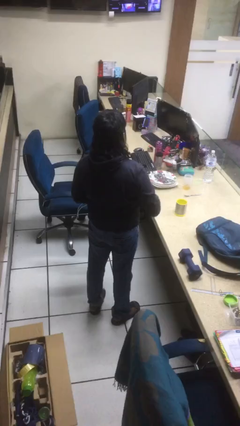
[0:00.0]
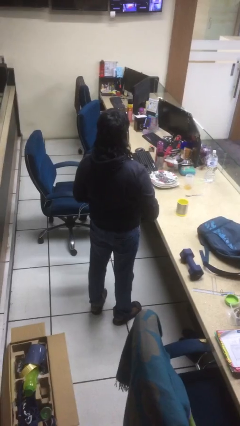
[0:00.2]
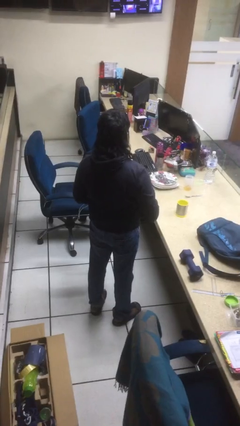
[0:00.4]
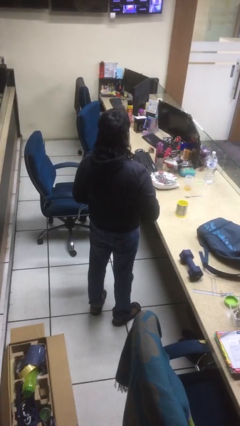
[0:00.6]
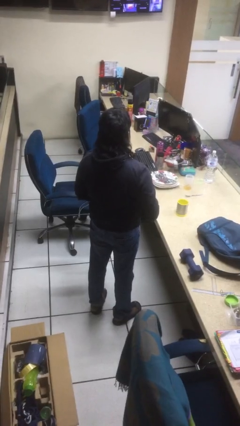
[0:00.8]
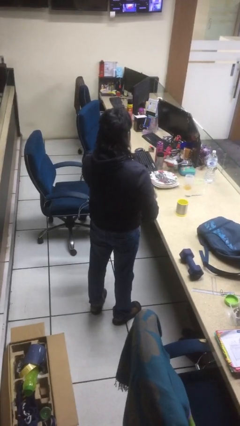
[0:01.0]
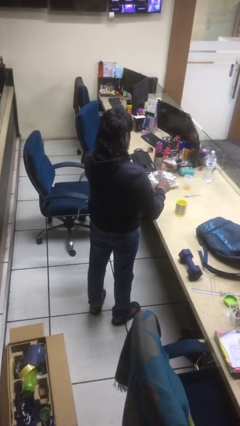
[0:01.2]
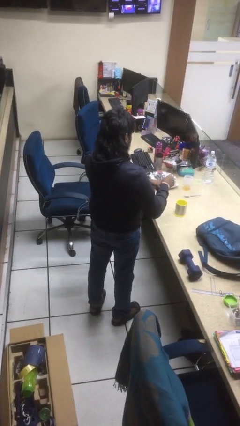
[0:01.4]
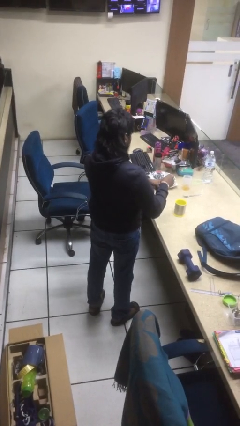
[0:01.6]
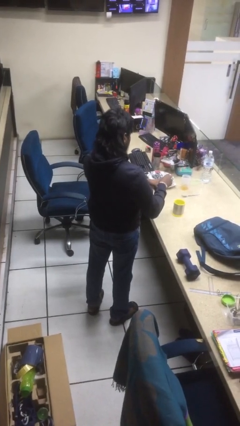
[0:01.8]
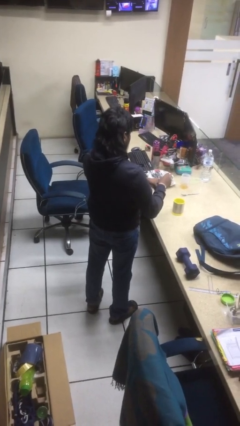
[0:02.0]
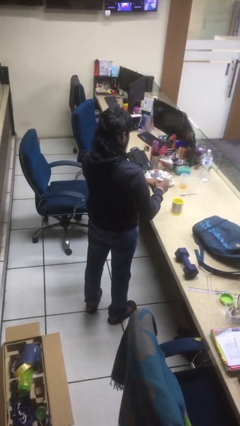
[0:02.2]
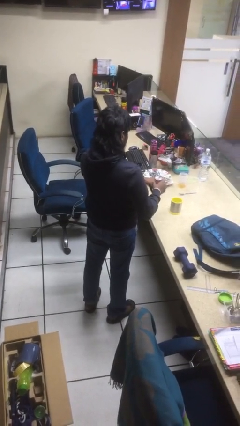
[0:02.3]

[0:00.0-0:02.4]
person opens beverage can

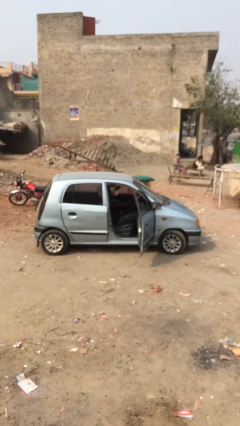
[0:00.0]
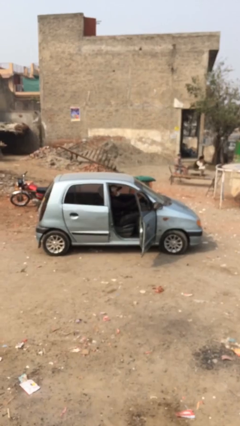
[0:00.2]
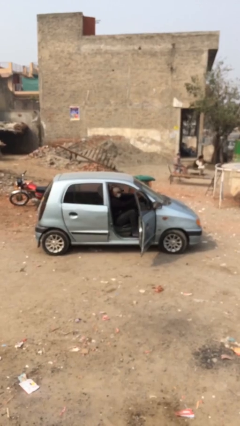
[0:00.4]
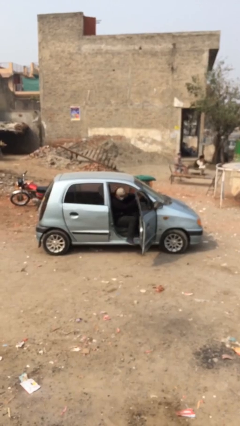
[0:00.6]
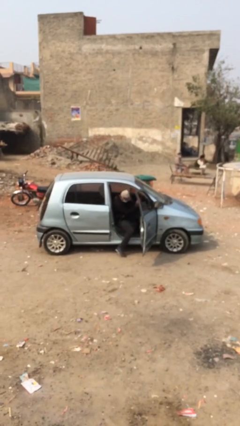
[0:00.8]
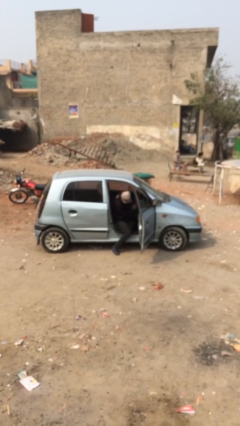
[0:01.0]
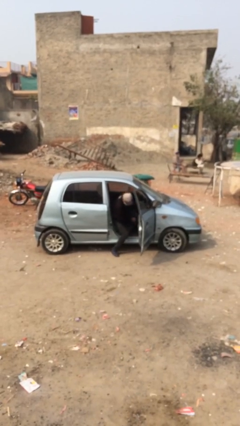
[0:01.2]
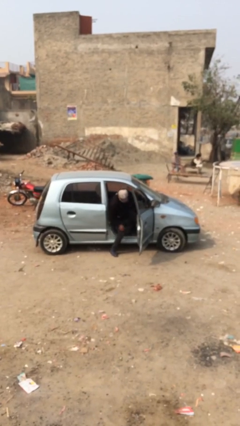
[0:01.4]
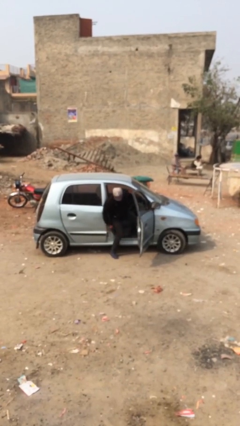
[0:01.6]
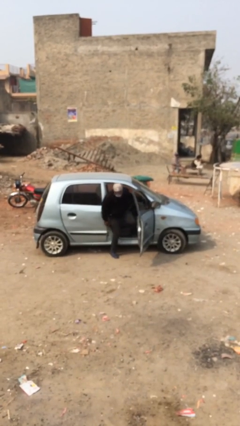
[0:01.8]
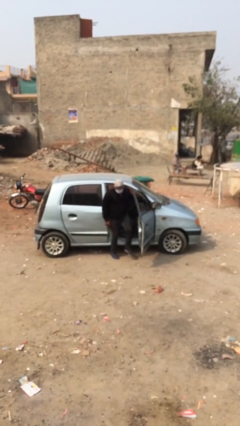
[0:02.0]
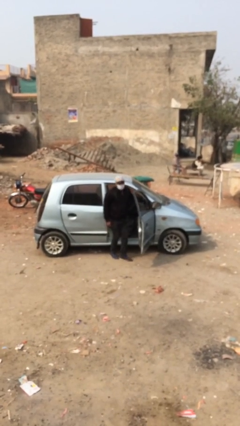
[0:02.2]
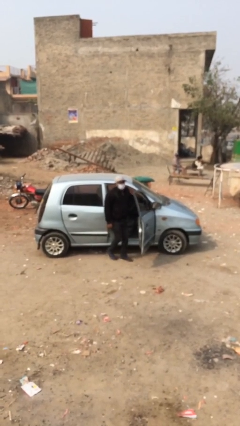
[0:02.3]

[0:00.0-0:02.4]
person exits car

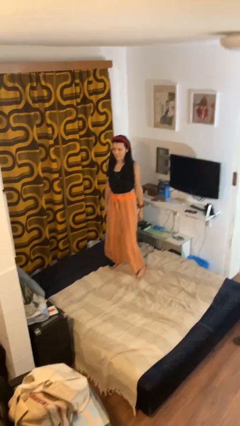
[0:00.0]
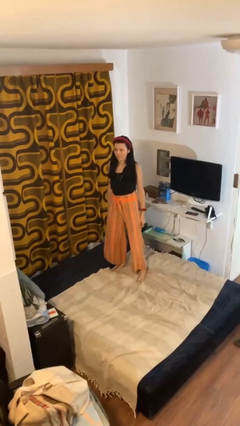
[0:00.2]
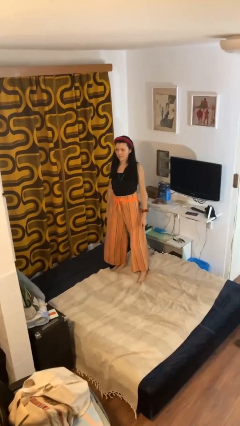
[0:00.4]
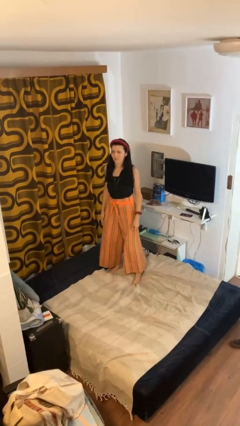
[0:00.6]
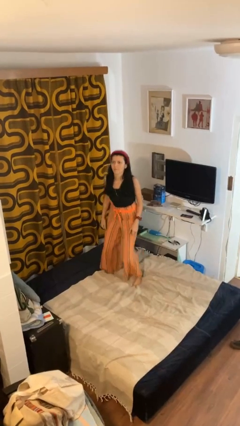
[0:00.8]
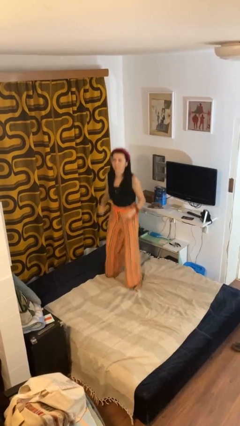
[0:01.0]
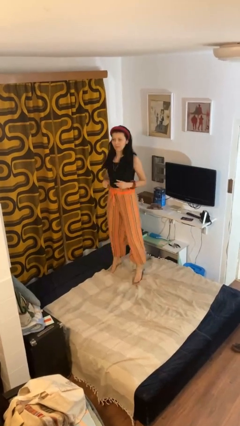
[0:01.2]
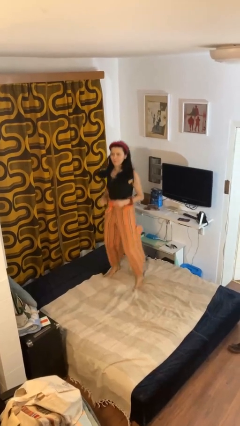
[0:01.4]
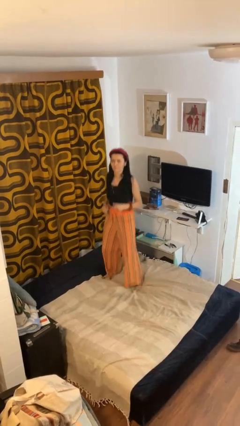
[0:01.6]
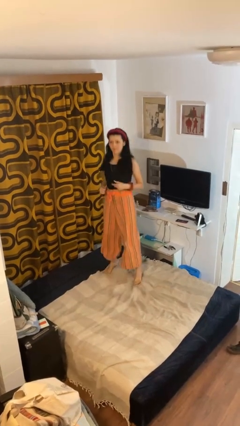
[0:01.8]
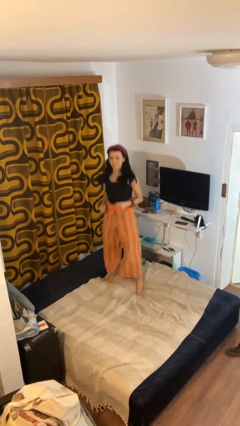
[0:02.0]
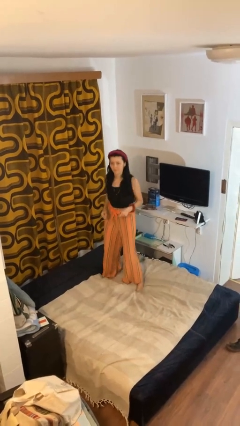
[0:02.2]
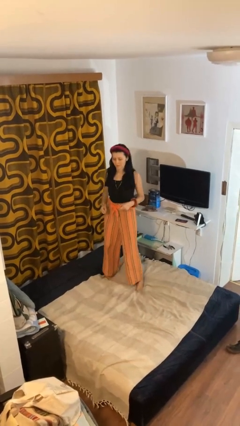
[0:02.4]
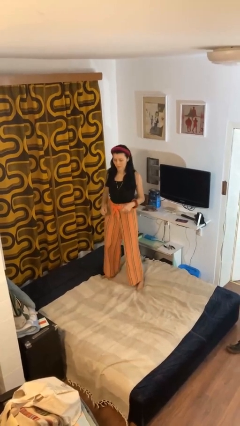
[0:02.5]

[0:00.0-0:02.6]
person jumps on bed

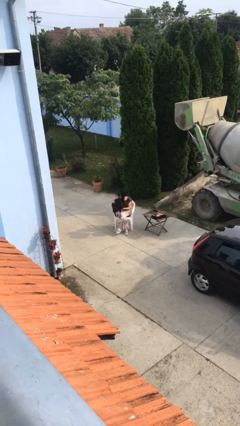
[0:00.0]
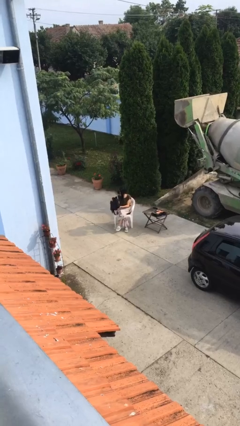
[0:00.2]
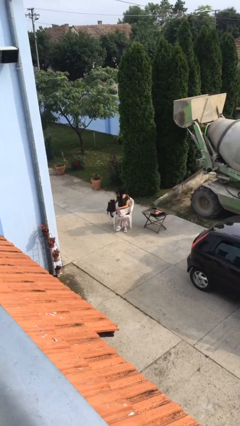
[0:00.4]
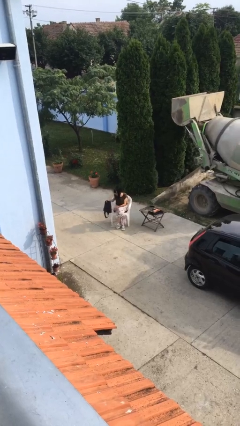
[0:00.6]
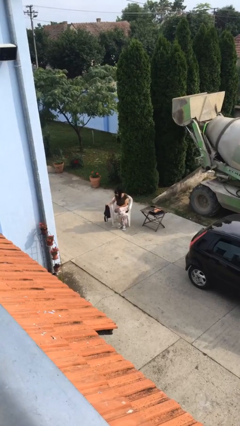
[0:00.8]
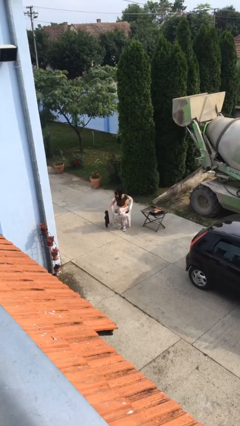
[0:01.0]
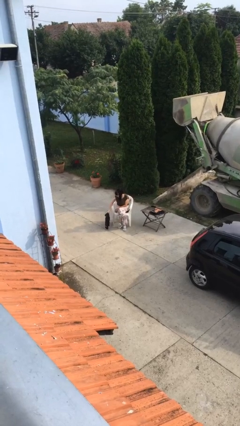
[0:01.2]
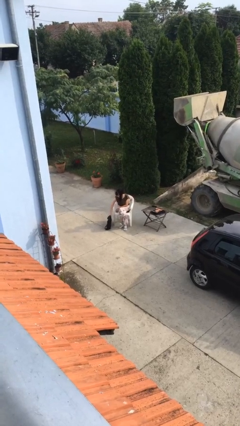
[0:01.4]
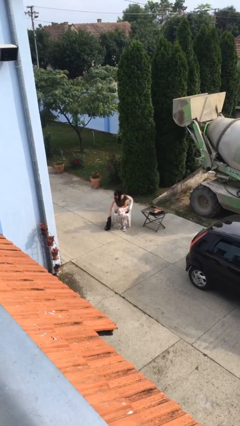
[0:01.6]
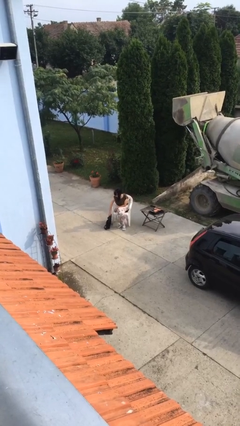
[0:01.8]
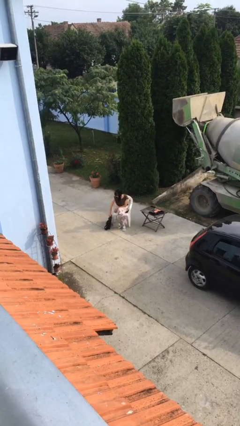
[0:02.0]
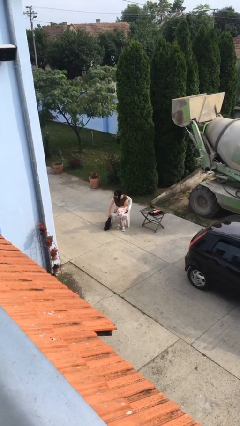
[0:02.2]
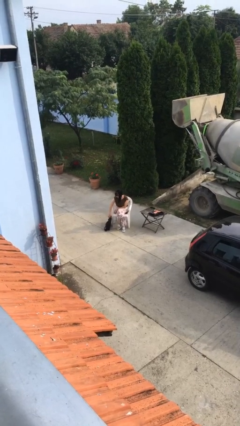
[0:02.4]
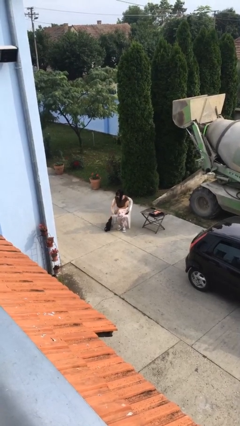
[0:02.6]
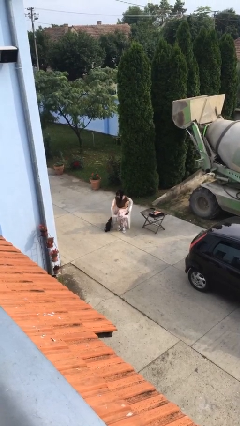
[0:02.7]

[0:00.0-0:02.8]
person puts down object on floor

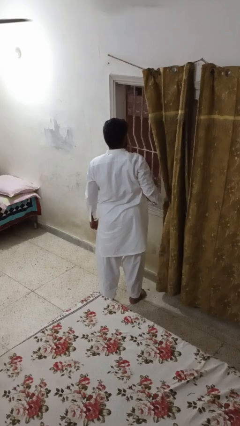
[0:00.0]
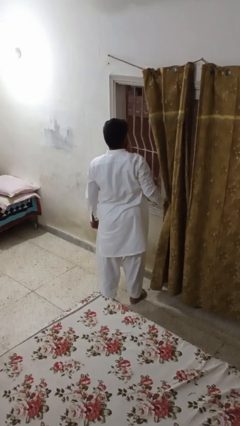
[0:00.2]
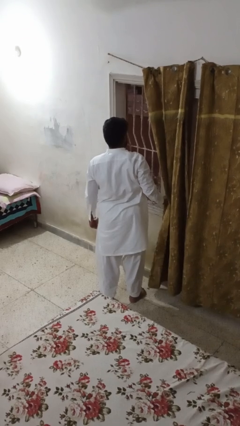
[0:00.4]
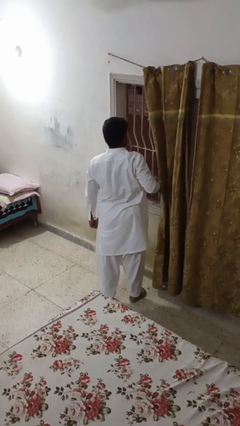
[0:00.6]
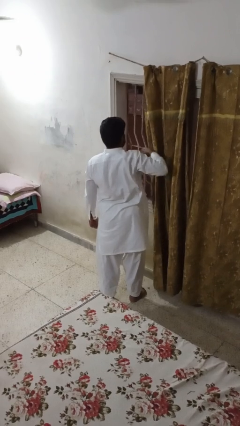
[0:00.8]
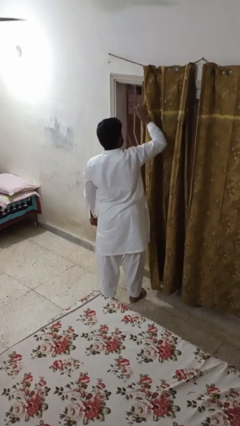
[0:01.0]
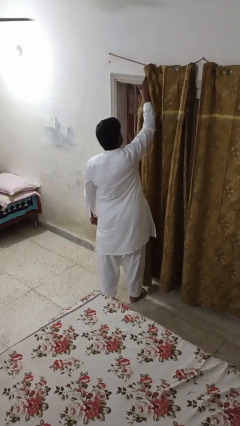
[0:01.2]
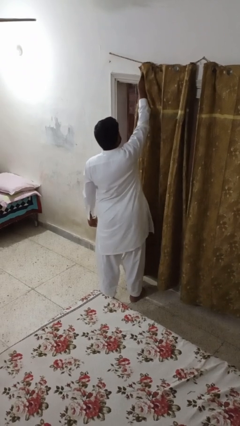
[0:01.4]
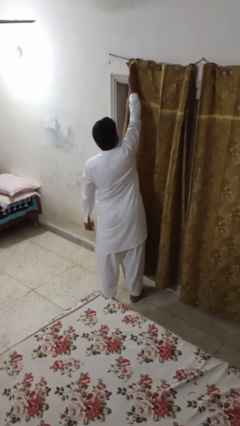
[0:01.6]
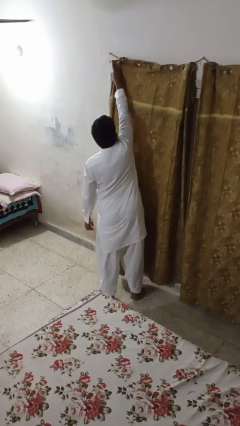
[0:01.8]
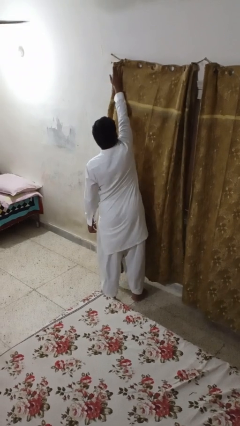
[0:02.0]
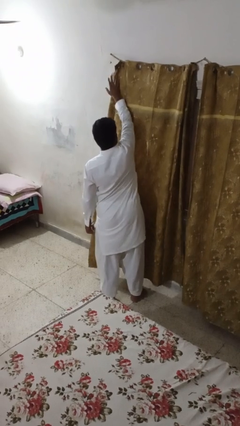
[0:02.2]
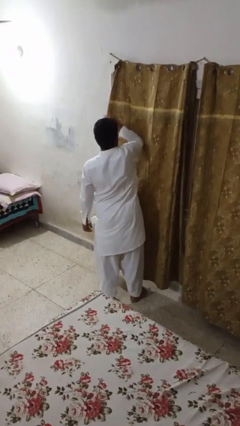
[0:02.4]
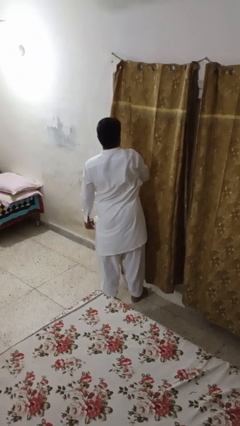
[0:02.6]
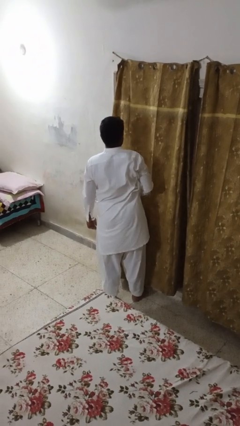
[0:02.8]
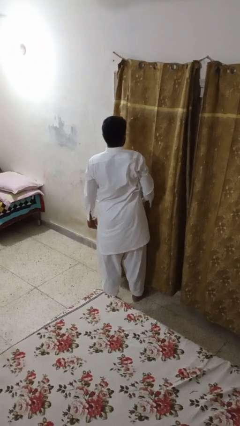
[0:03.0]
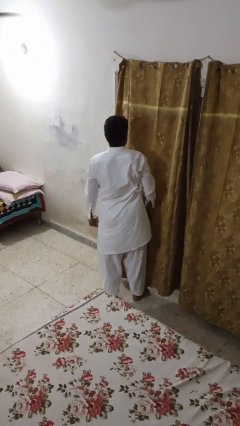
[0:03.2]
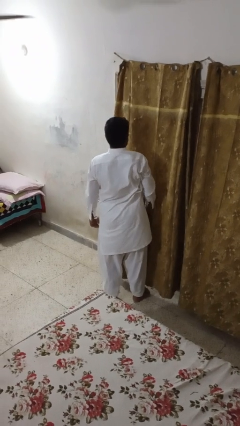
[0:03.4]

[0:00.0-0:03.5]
person closes curtains

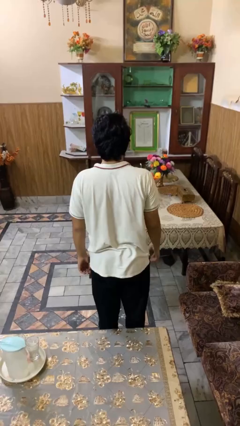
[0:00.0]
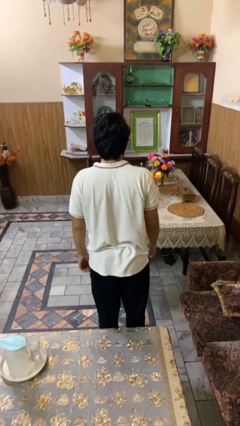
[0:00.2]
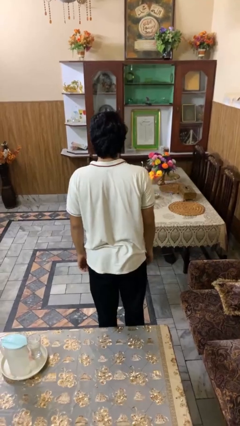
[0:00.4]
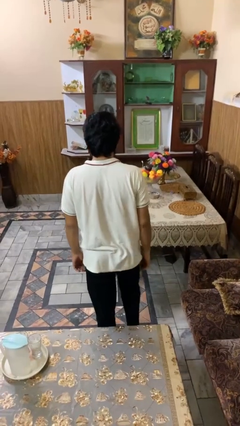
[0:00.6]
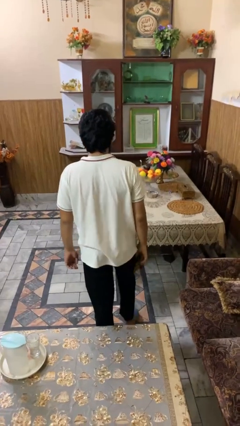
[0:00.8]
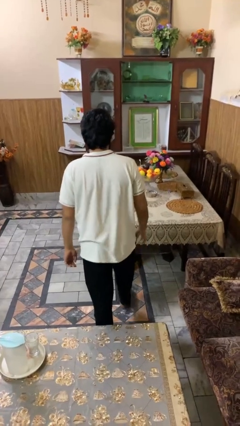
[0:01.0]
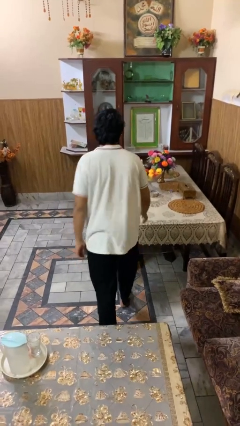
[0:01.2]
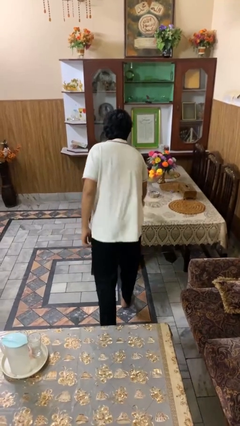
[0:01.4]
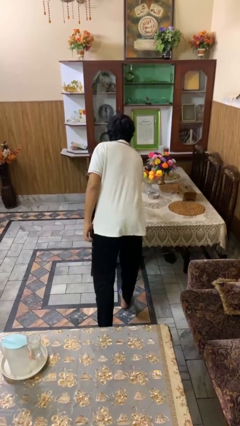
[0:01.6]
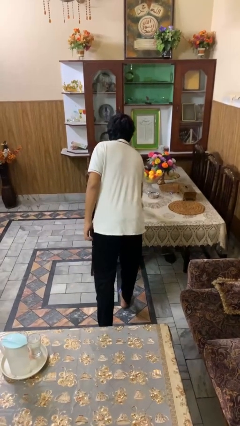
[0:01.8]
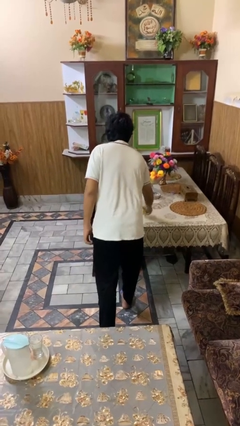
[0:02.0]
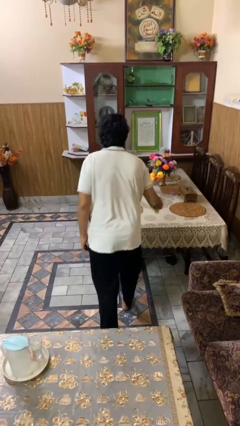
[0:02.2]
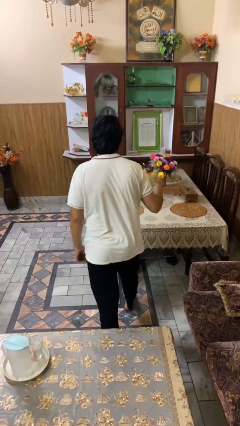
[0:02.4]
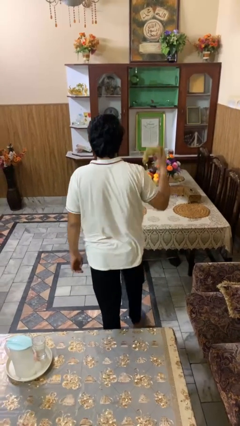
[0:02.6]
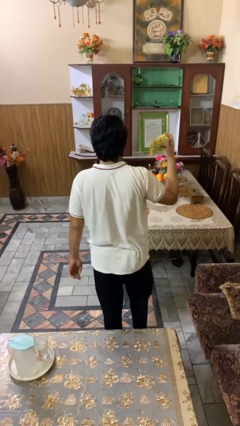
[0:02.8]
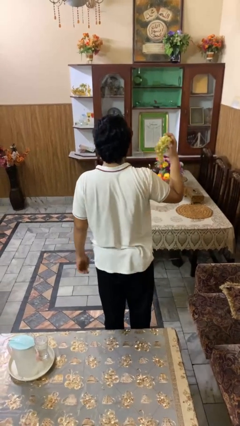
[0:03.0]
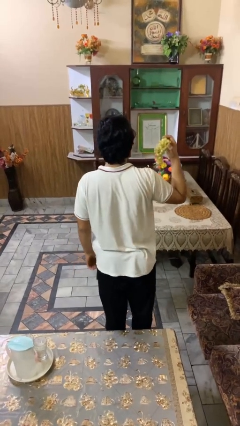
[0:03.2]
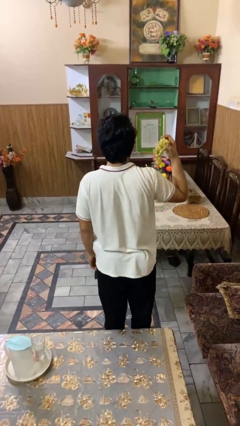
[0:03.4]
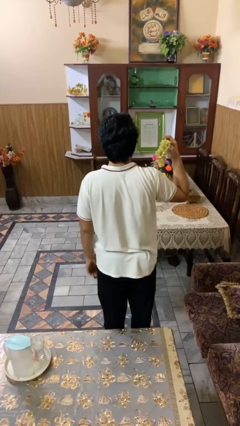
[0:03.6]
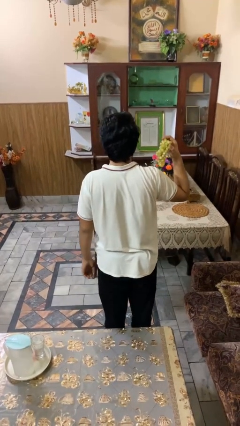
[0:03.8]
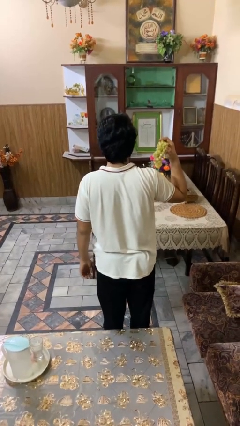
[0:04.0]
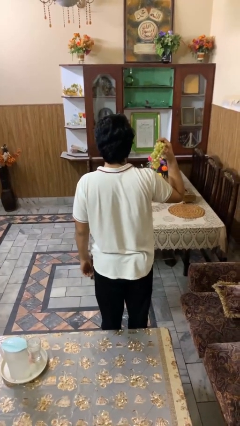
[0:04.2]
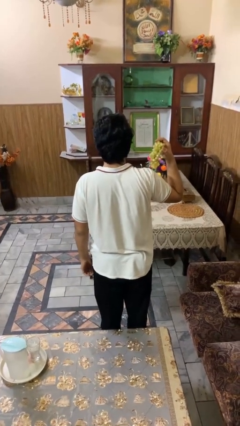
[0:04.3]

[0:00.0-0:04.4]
person picks up object from table
